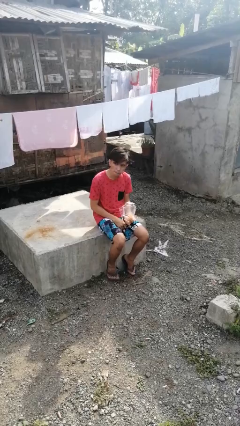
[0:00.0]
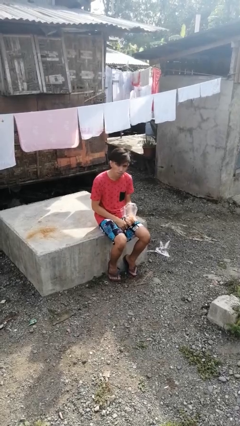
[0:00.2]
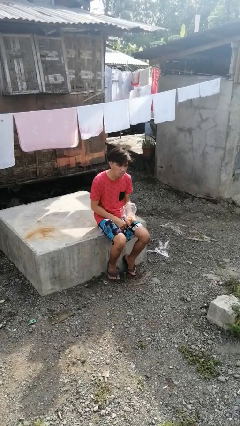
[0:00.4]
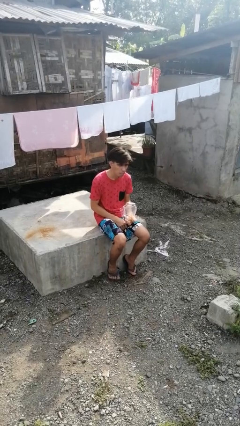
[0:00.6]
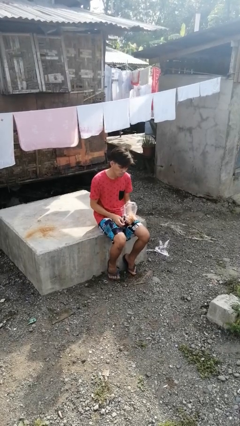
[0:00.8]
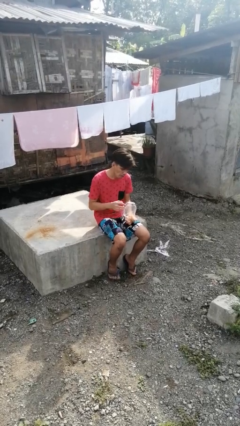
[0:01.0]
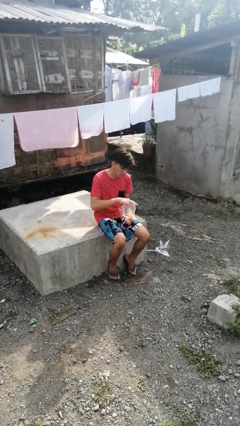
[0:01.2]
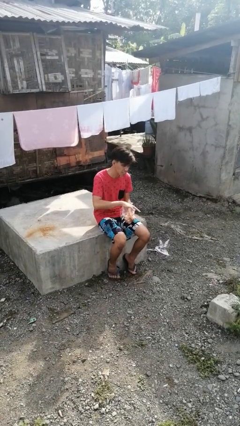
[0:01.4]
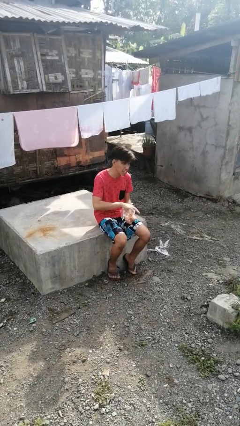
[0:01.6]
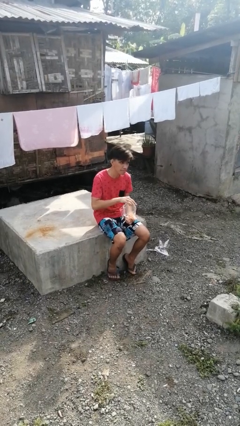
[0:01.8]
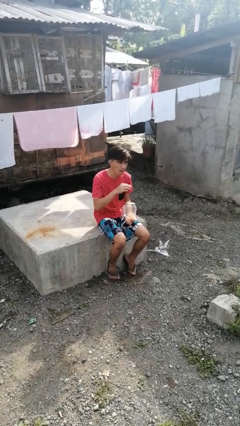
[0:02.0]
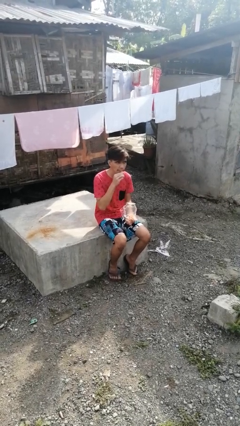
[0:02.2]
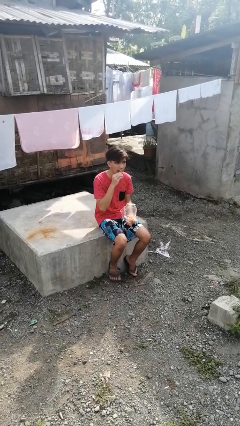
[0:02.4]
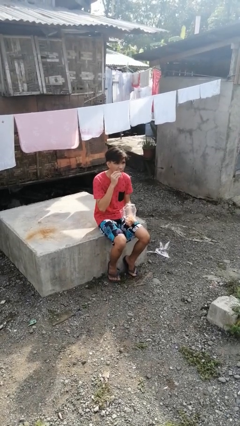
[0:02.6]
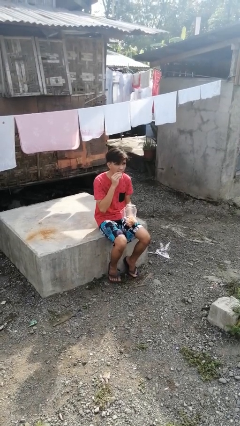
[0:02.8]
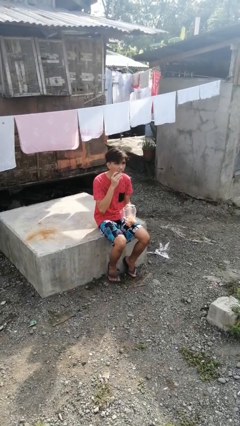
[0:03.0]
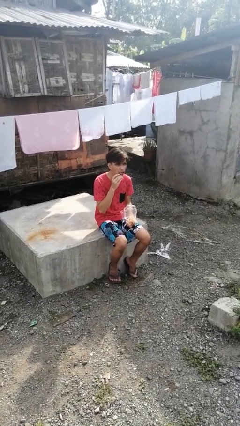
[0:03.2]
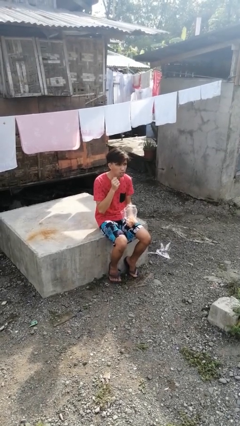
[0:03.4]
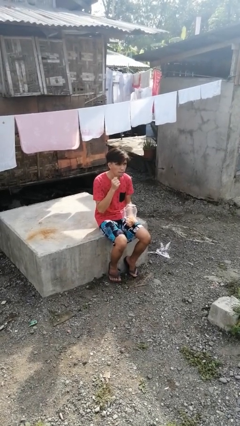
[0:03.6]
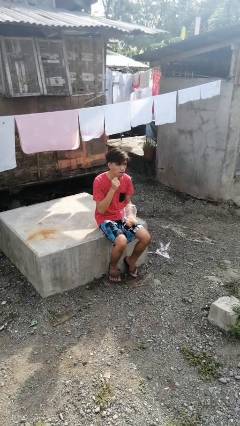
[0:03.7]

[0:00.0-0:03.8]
person eats snack from bag

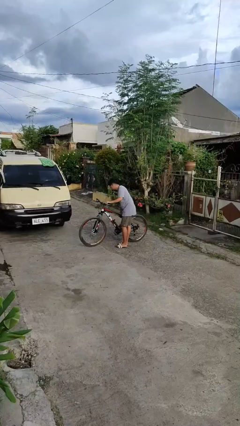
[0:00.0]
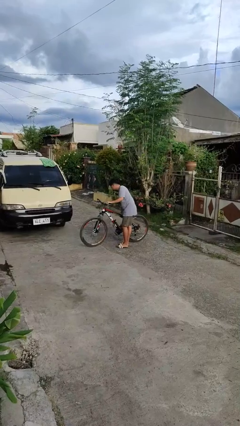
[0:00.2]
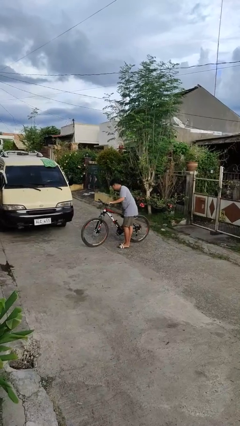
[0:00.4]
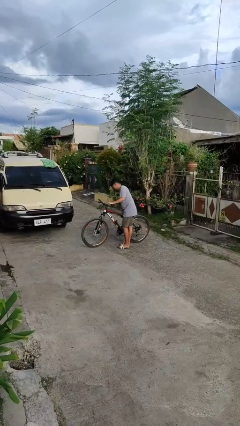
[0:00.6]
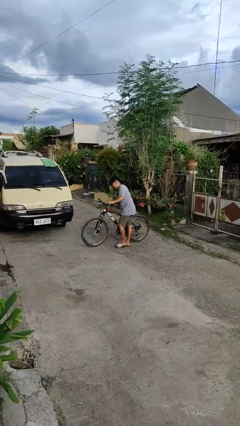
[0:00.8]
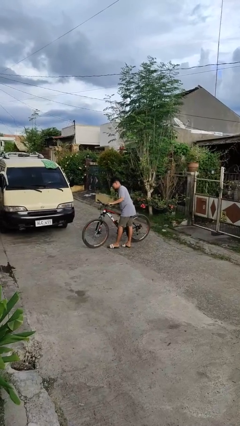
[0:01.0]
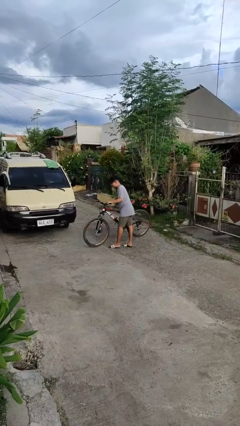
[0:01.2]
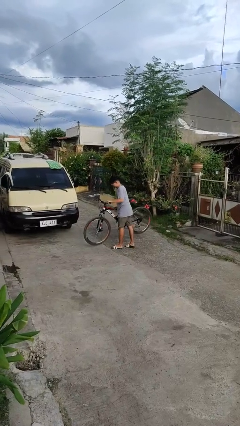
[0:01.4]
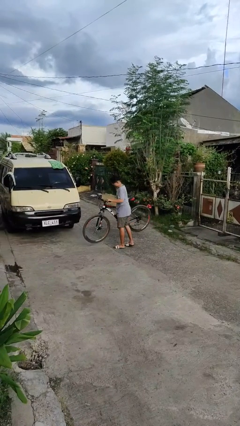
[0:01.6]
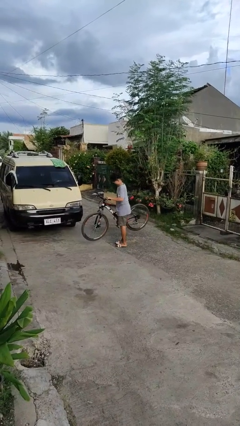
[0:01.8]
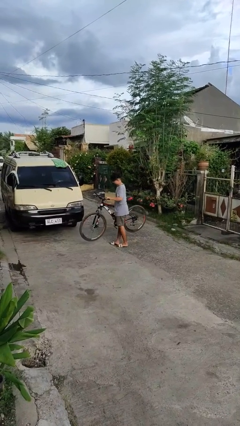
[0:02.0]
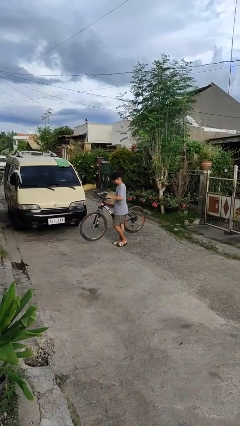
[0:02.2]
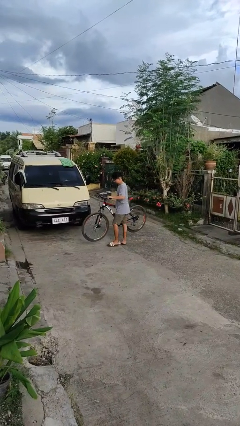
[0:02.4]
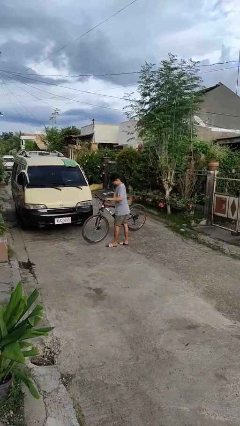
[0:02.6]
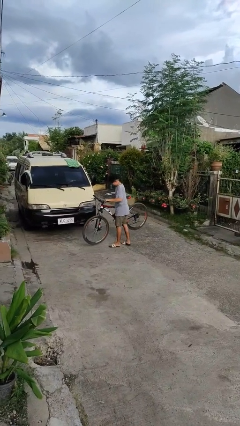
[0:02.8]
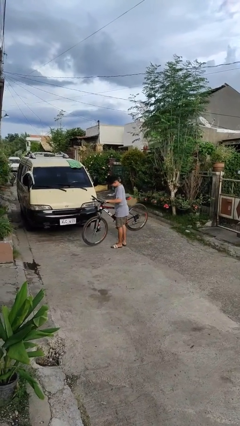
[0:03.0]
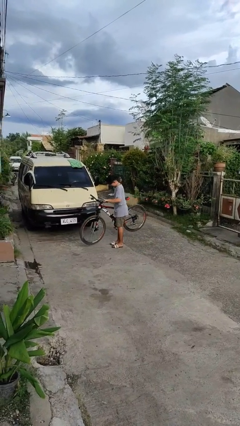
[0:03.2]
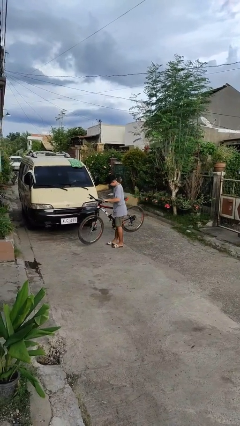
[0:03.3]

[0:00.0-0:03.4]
person carries bicycle

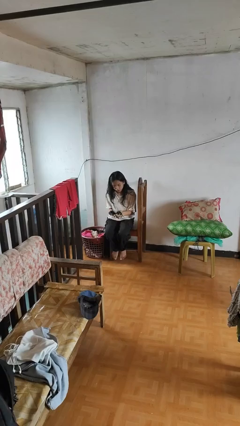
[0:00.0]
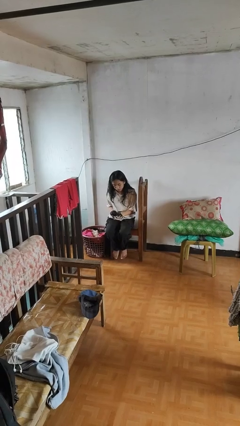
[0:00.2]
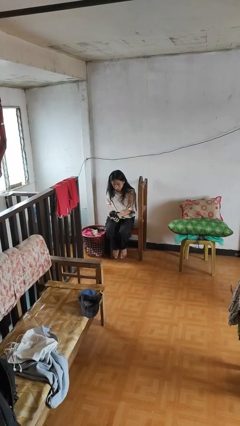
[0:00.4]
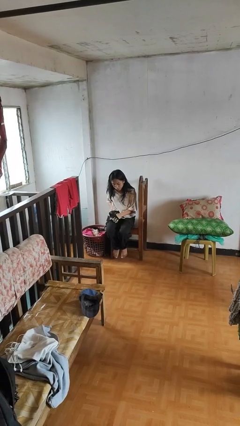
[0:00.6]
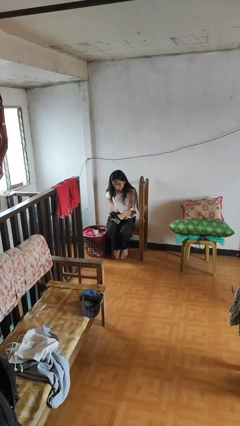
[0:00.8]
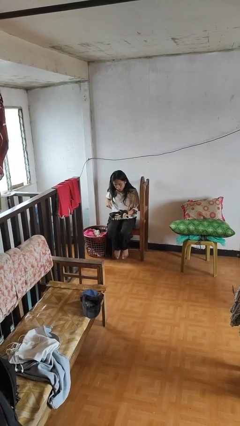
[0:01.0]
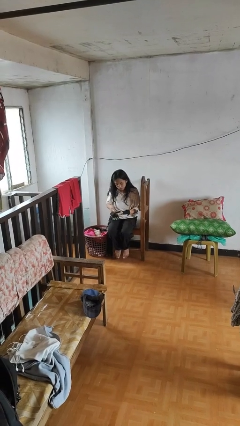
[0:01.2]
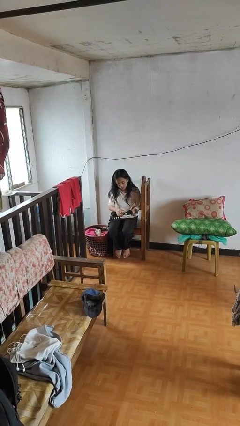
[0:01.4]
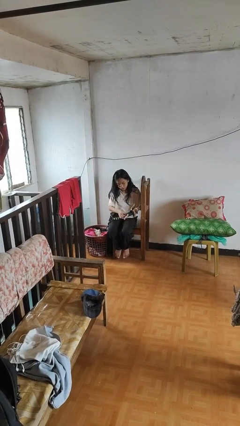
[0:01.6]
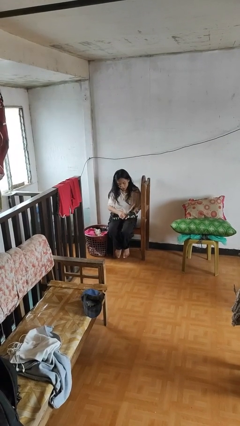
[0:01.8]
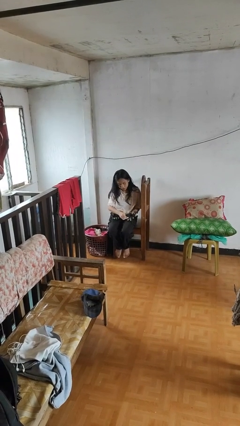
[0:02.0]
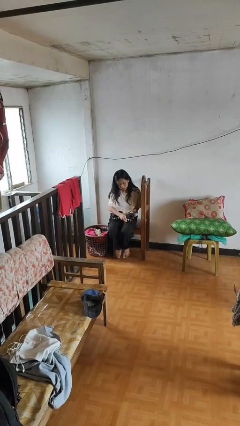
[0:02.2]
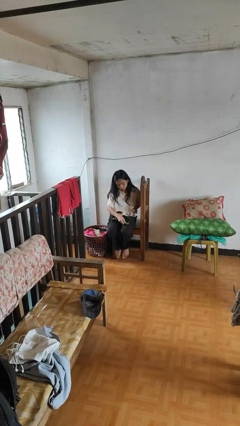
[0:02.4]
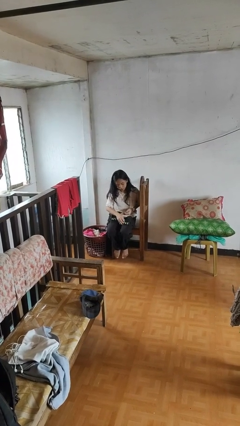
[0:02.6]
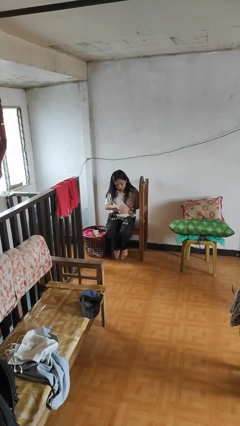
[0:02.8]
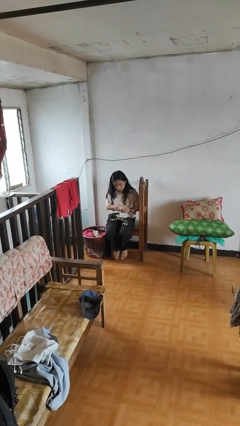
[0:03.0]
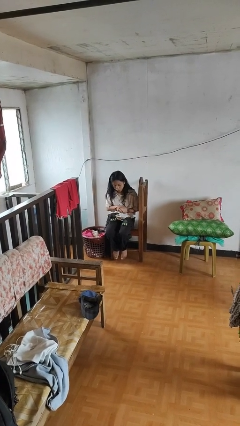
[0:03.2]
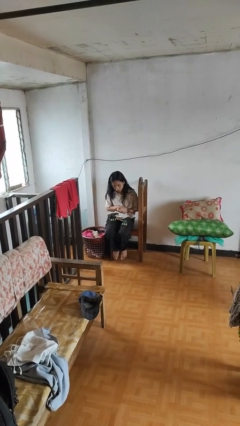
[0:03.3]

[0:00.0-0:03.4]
person takes off gloves

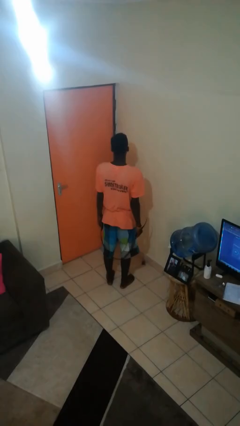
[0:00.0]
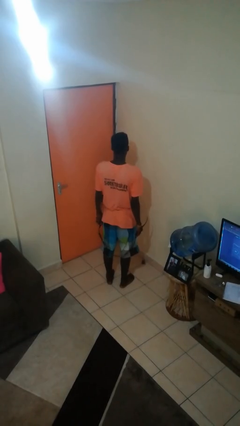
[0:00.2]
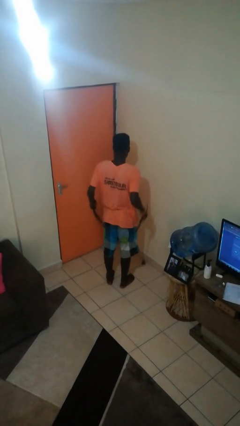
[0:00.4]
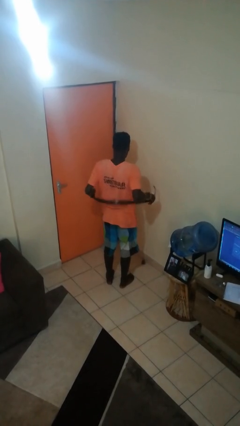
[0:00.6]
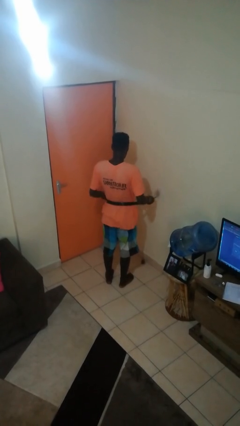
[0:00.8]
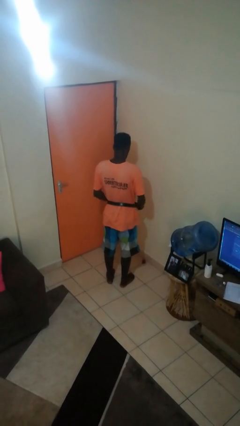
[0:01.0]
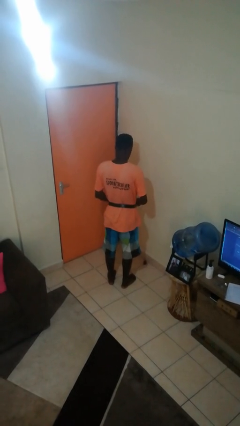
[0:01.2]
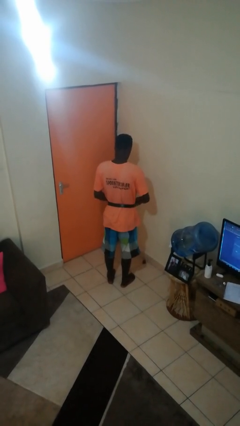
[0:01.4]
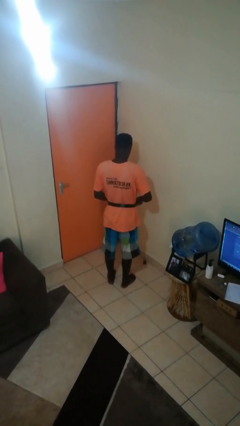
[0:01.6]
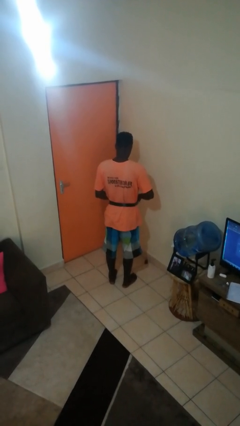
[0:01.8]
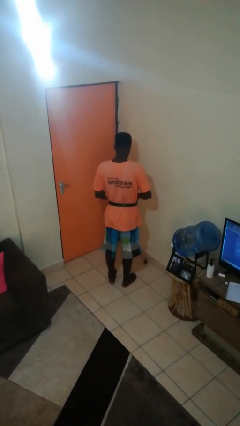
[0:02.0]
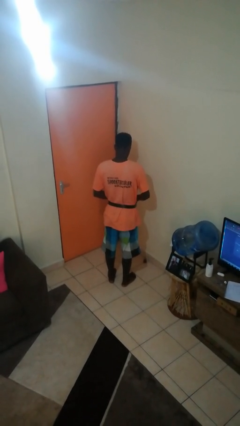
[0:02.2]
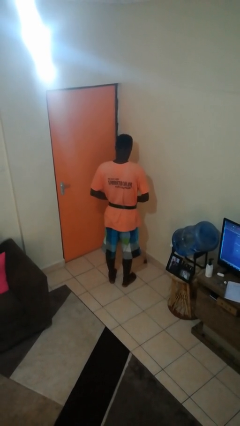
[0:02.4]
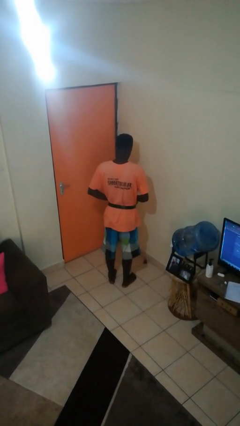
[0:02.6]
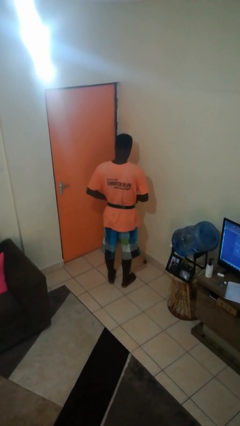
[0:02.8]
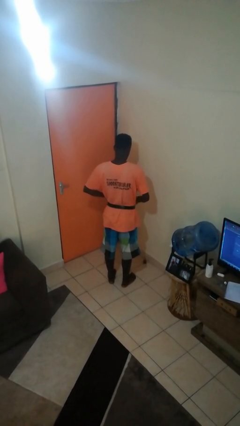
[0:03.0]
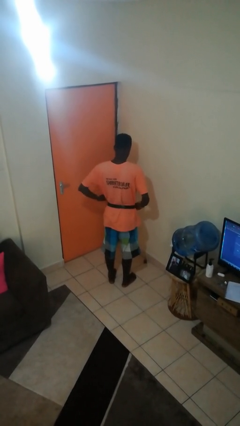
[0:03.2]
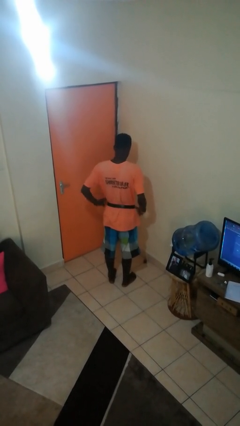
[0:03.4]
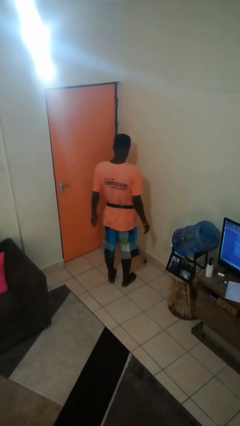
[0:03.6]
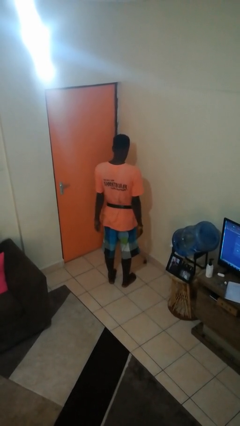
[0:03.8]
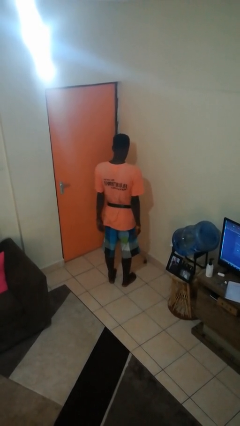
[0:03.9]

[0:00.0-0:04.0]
person puts on belt

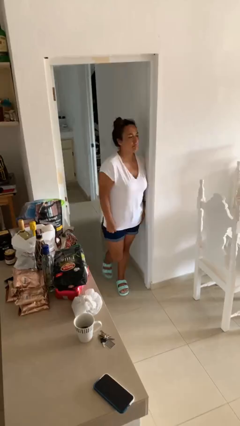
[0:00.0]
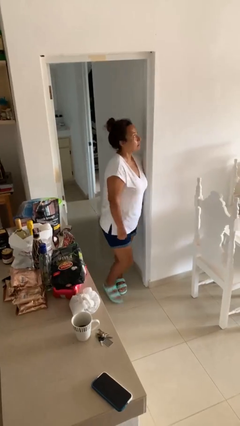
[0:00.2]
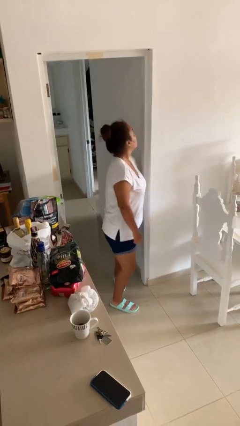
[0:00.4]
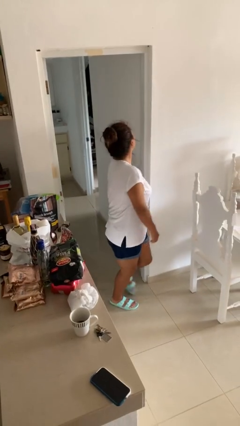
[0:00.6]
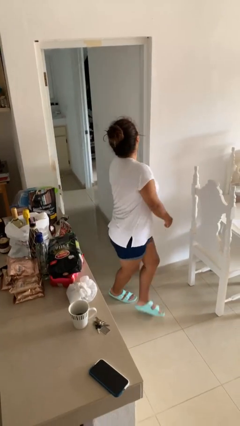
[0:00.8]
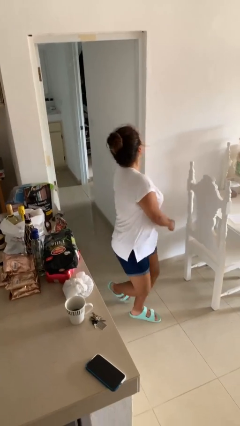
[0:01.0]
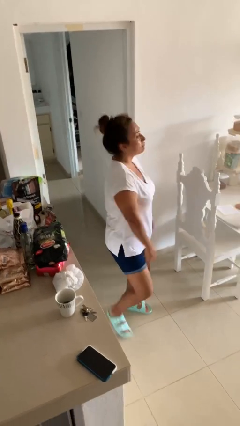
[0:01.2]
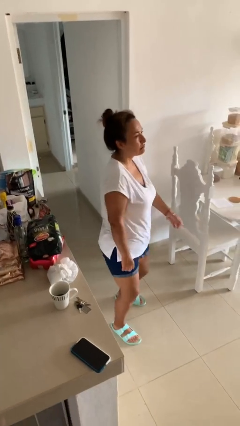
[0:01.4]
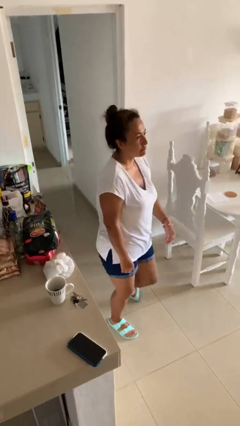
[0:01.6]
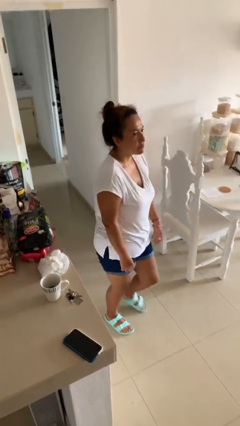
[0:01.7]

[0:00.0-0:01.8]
person bumps into wall

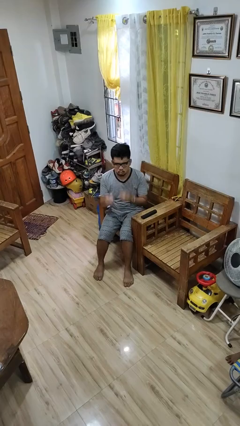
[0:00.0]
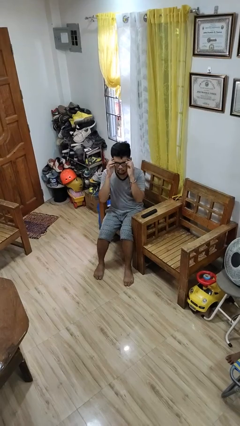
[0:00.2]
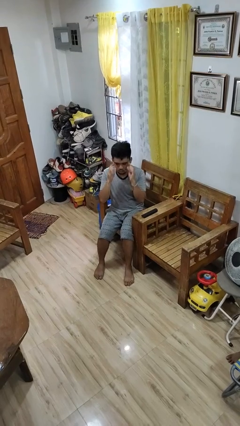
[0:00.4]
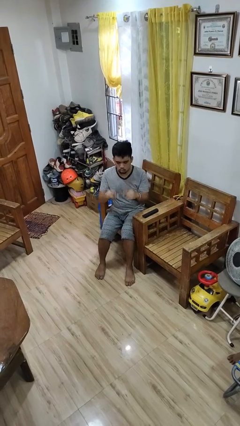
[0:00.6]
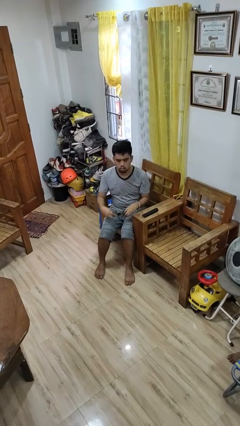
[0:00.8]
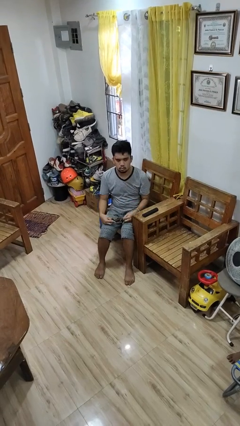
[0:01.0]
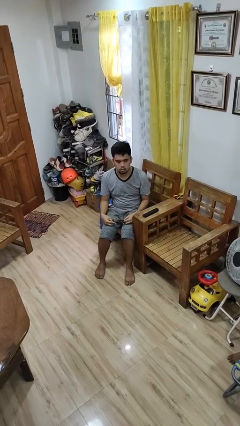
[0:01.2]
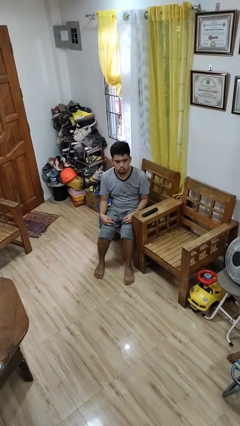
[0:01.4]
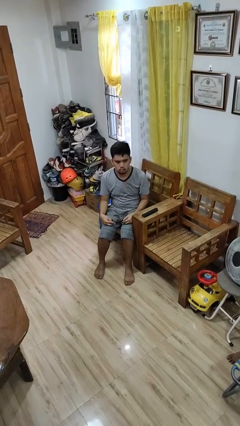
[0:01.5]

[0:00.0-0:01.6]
person takes off glasses
